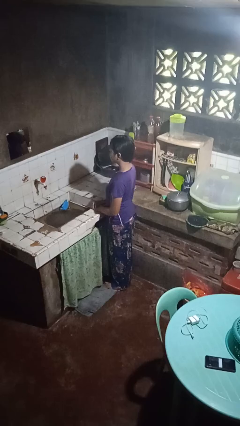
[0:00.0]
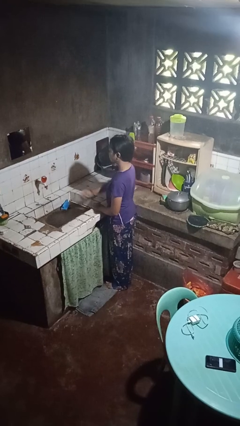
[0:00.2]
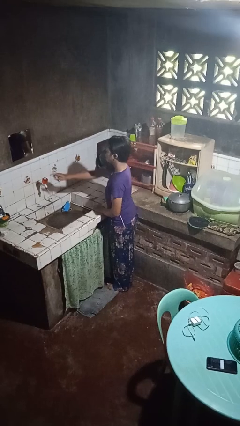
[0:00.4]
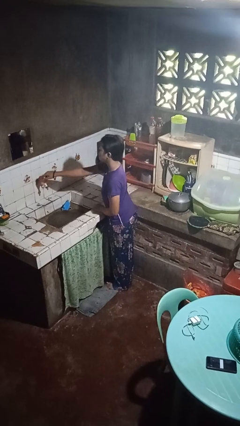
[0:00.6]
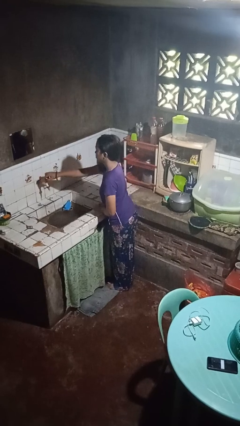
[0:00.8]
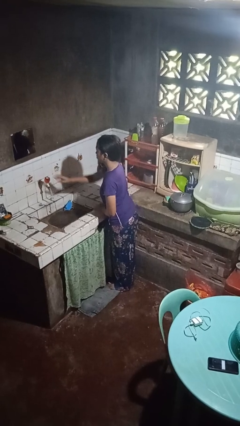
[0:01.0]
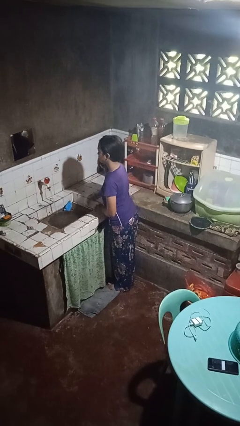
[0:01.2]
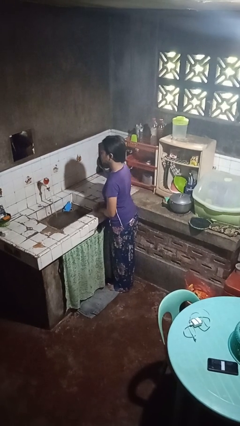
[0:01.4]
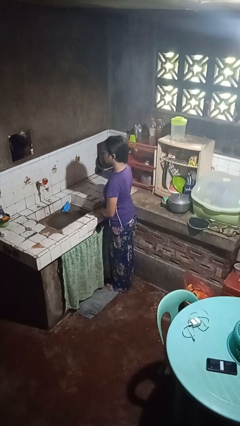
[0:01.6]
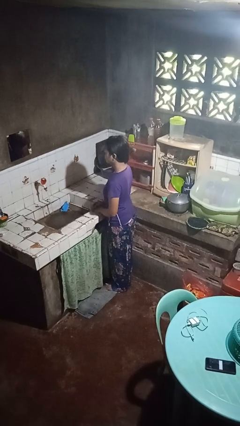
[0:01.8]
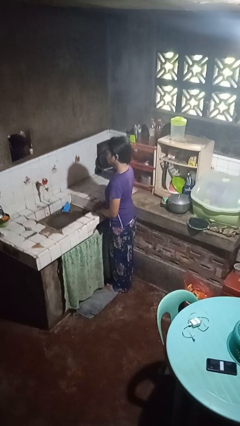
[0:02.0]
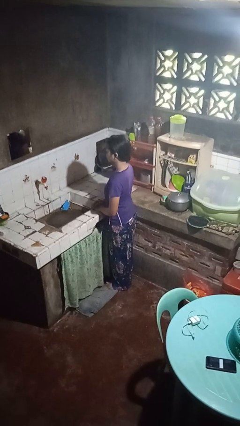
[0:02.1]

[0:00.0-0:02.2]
person turns on faucet

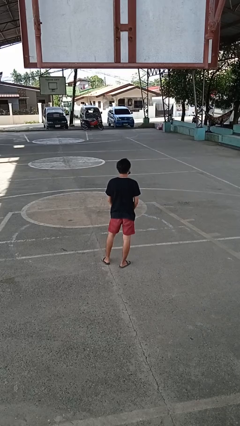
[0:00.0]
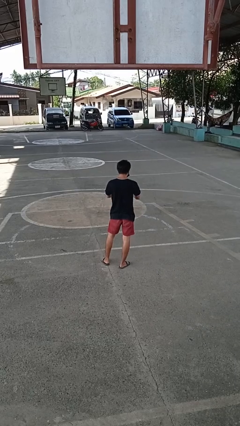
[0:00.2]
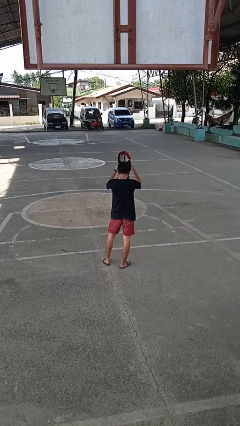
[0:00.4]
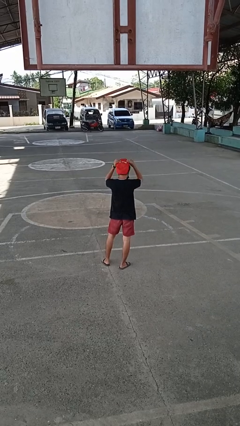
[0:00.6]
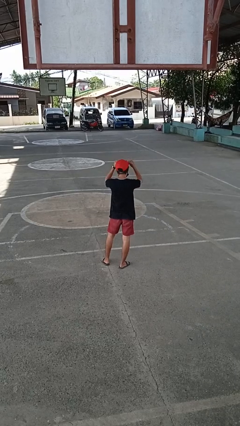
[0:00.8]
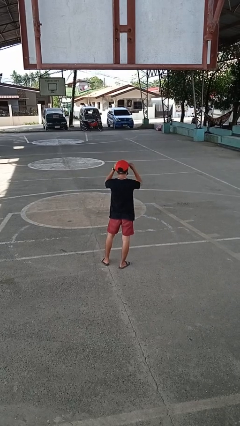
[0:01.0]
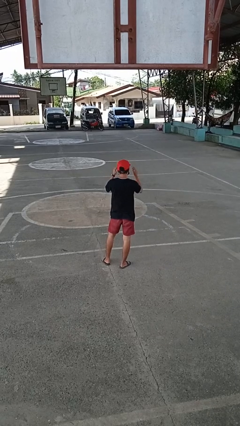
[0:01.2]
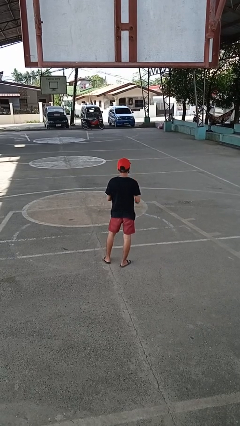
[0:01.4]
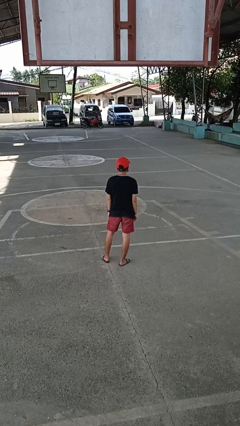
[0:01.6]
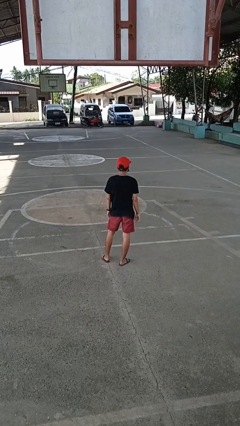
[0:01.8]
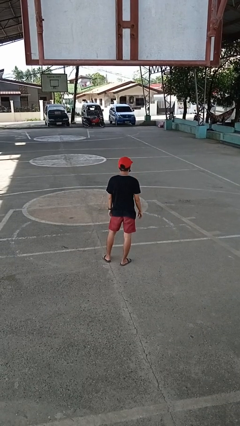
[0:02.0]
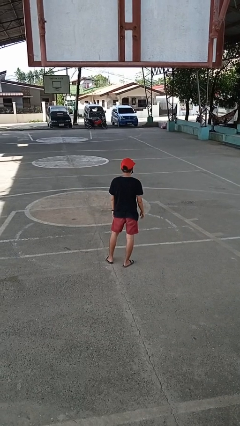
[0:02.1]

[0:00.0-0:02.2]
person puts on hat

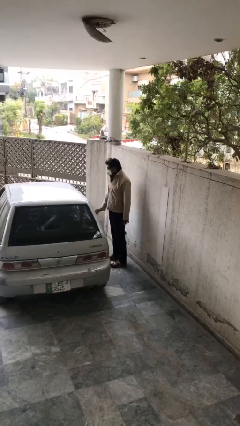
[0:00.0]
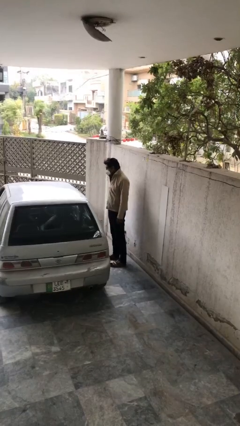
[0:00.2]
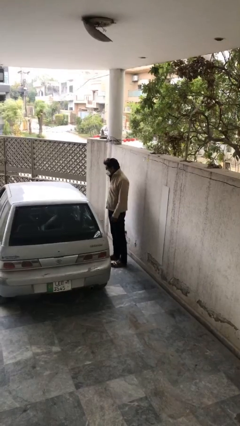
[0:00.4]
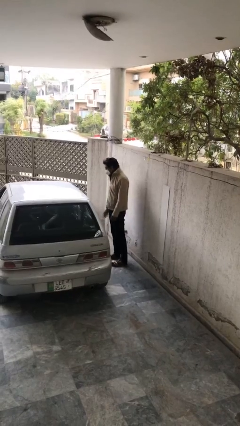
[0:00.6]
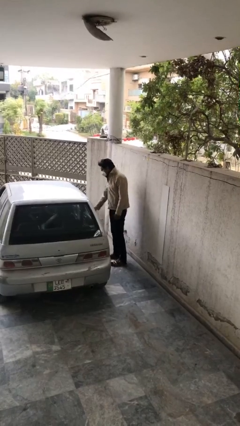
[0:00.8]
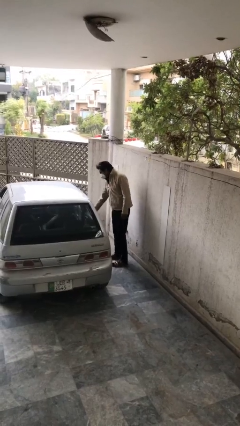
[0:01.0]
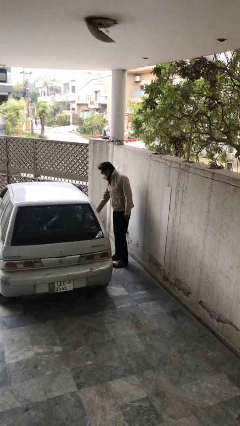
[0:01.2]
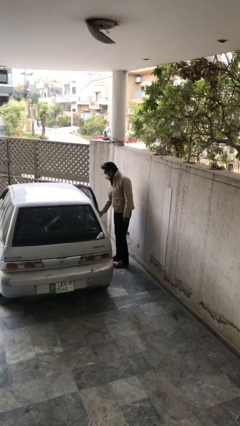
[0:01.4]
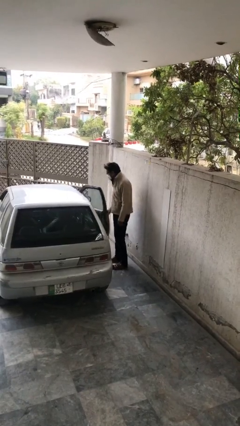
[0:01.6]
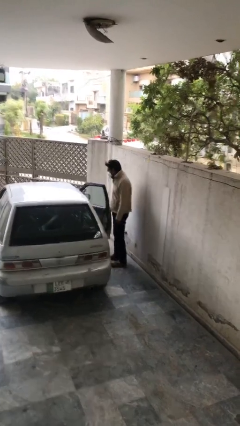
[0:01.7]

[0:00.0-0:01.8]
person opens car door

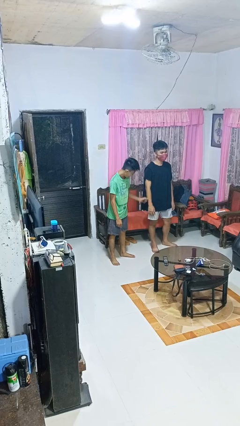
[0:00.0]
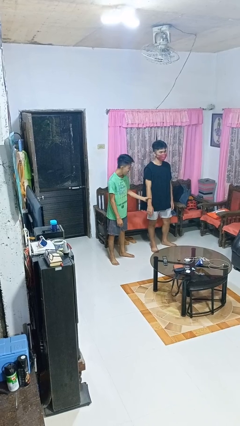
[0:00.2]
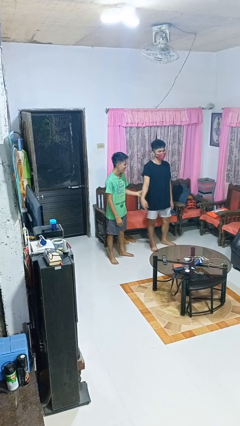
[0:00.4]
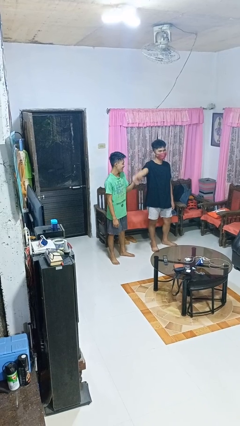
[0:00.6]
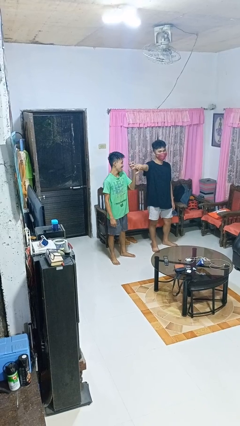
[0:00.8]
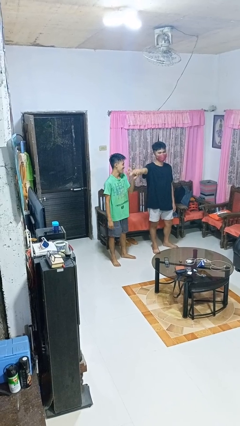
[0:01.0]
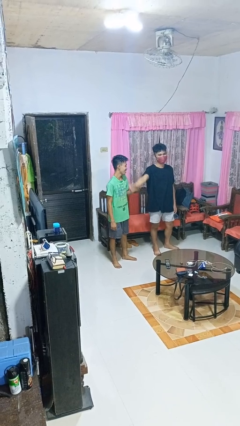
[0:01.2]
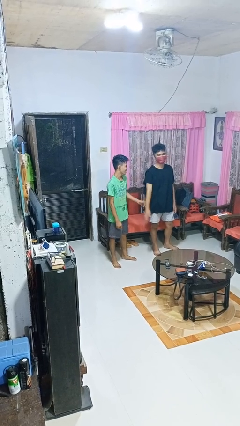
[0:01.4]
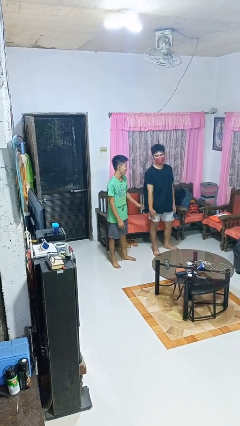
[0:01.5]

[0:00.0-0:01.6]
person grabs person by forearm

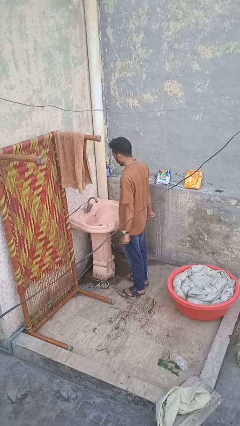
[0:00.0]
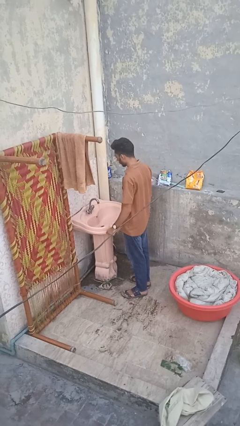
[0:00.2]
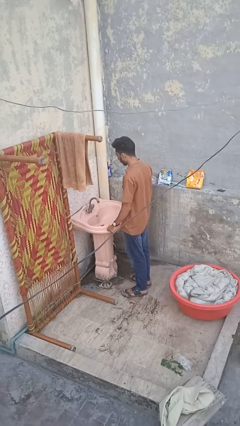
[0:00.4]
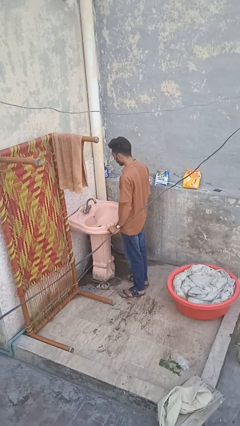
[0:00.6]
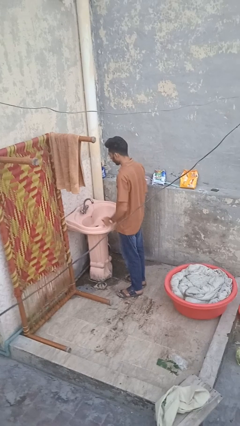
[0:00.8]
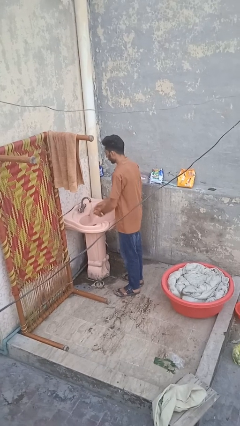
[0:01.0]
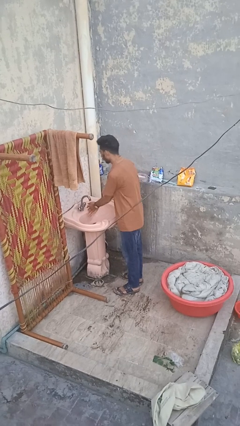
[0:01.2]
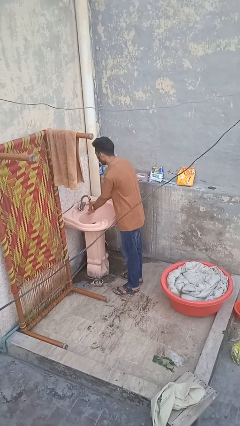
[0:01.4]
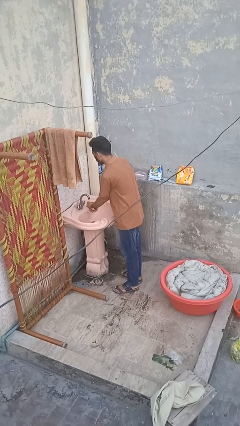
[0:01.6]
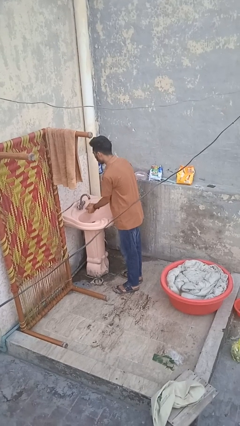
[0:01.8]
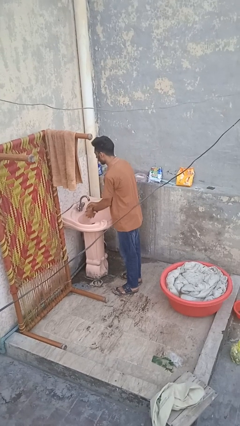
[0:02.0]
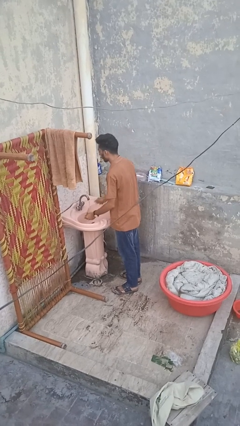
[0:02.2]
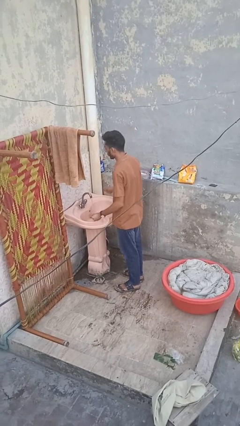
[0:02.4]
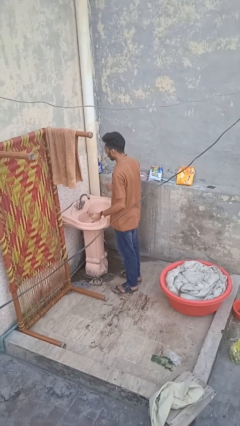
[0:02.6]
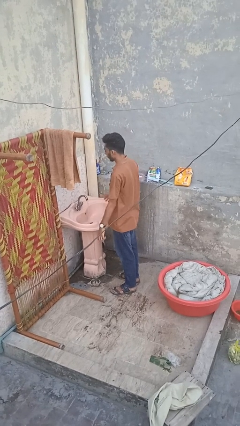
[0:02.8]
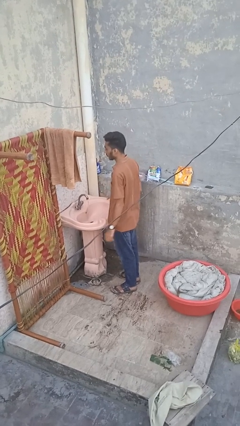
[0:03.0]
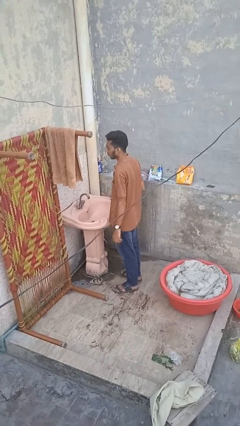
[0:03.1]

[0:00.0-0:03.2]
person washes hands

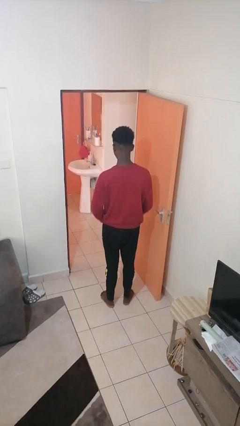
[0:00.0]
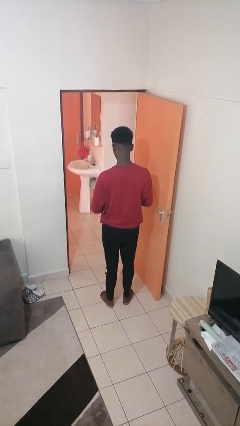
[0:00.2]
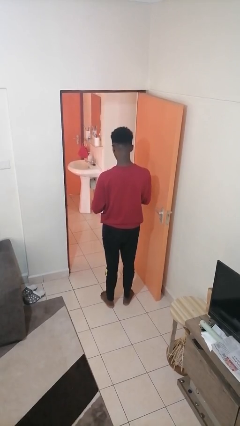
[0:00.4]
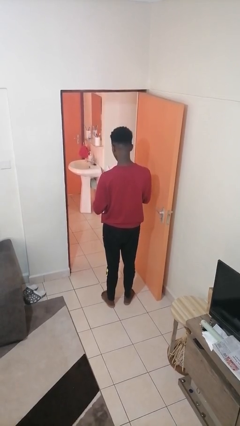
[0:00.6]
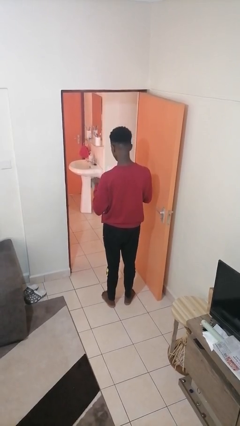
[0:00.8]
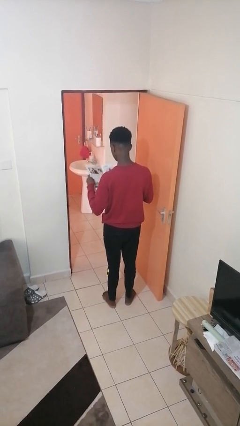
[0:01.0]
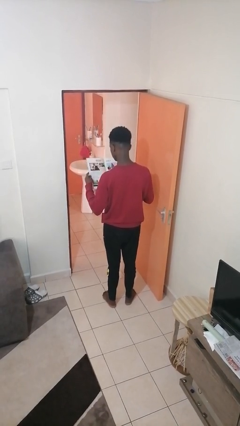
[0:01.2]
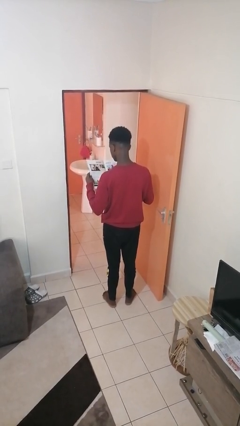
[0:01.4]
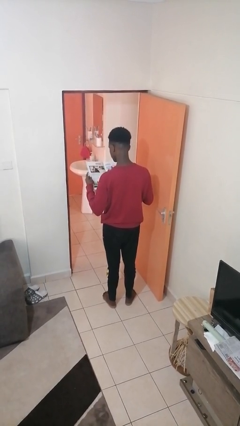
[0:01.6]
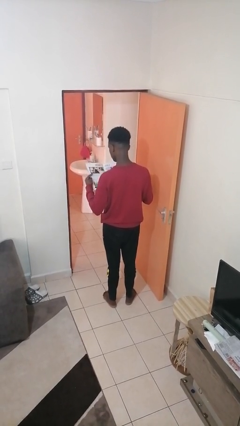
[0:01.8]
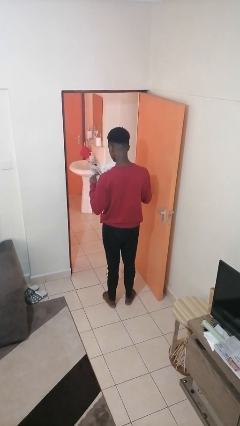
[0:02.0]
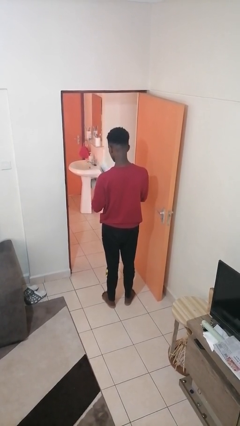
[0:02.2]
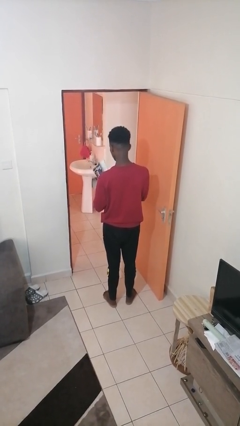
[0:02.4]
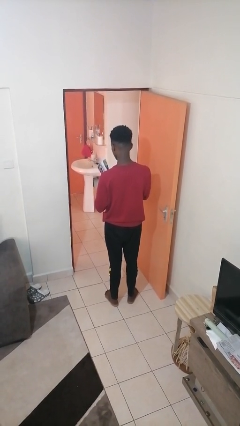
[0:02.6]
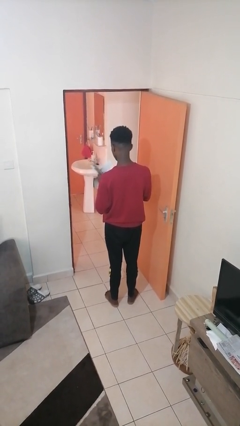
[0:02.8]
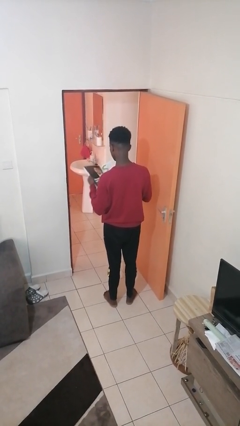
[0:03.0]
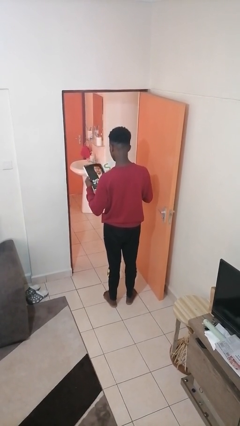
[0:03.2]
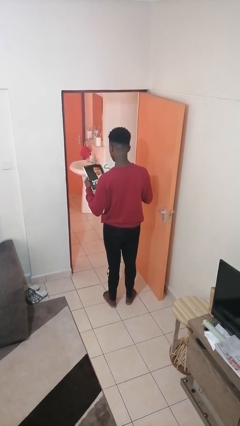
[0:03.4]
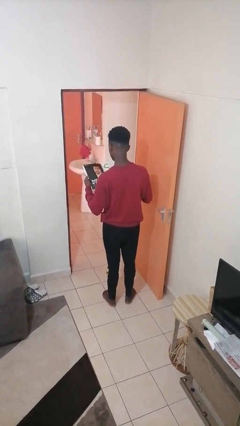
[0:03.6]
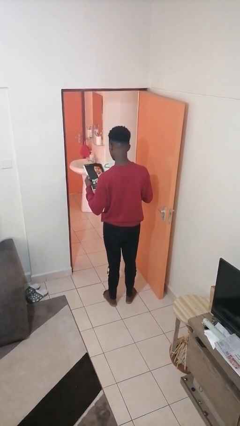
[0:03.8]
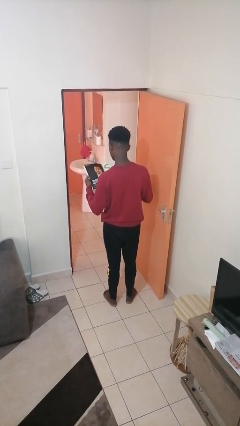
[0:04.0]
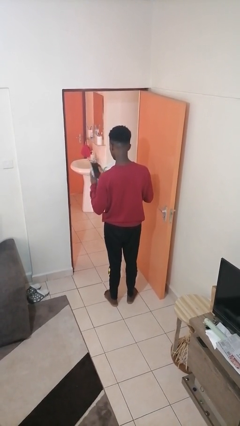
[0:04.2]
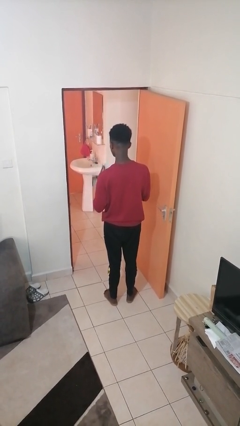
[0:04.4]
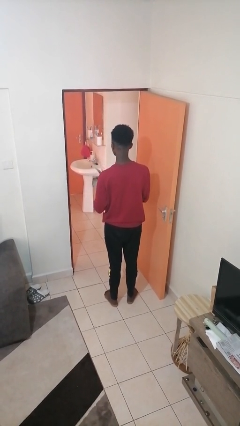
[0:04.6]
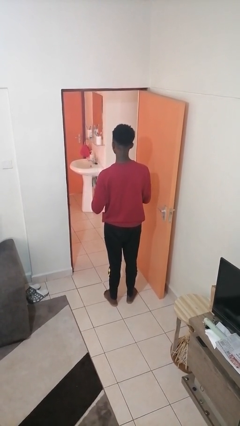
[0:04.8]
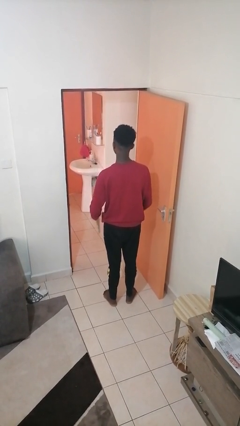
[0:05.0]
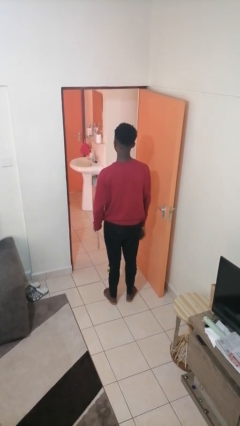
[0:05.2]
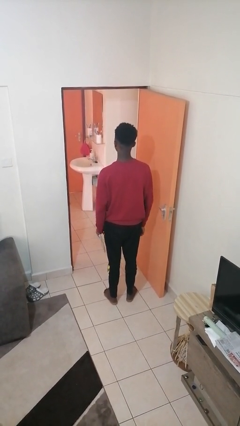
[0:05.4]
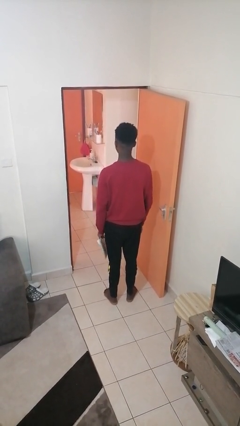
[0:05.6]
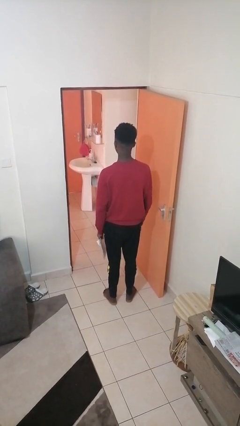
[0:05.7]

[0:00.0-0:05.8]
person reads magazine

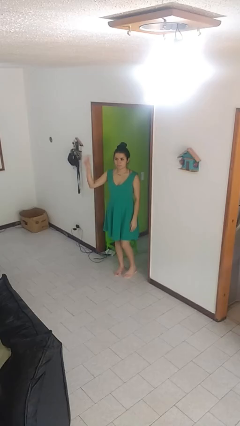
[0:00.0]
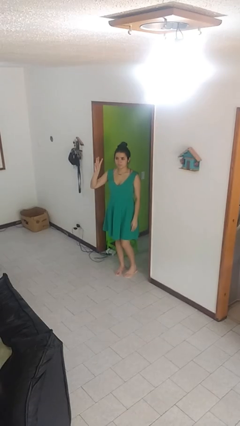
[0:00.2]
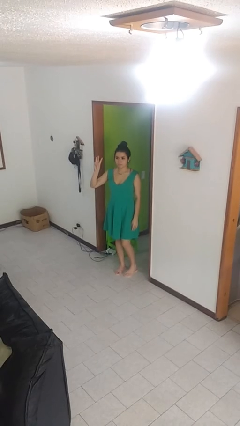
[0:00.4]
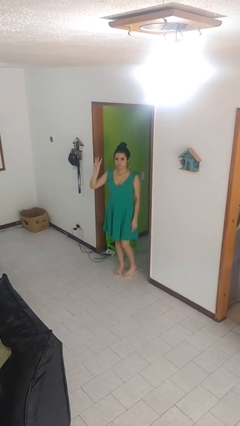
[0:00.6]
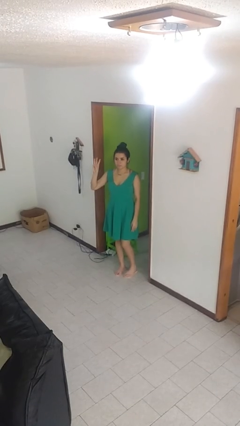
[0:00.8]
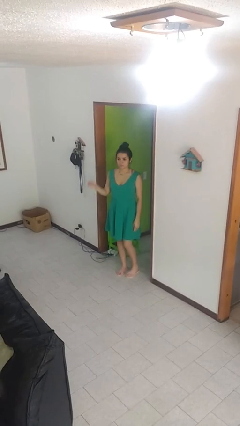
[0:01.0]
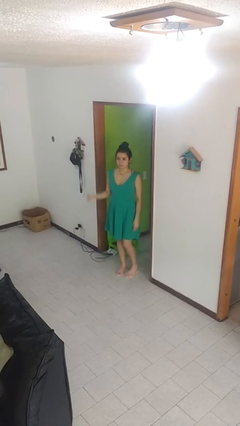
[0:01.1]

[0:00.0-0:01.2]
person gestures number three
